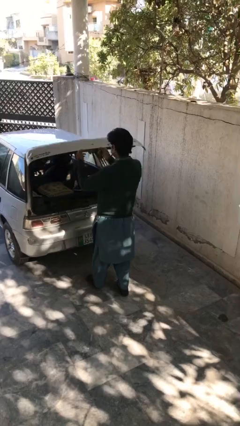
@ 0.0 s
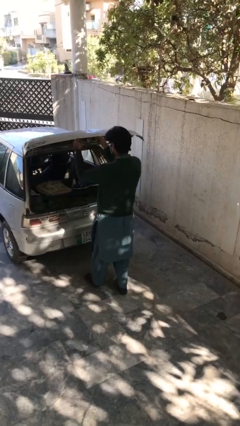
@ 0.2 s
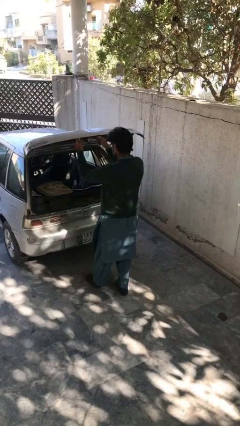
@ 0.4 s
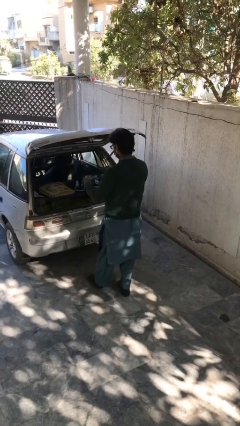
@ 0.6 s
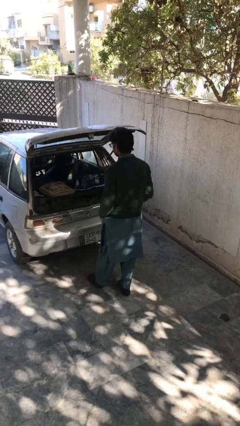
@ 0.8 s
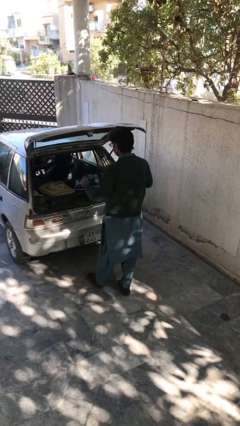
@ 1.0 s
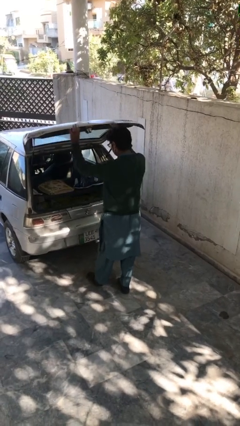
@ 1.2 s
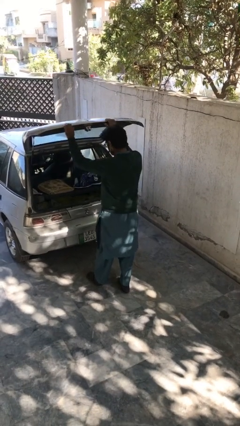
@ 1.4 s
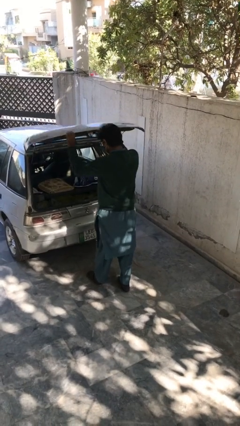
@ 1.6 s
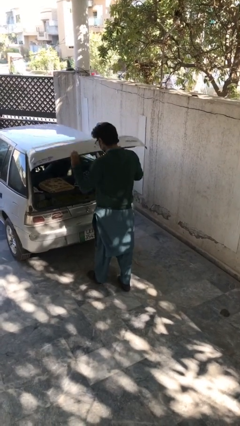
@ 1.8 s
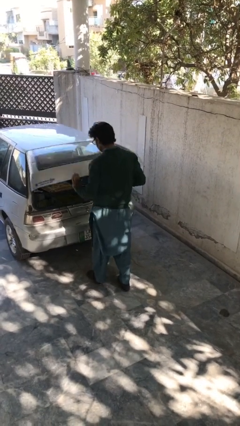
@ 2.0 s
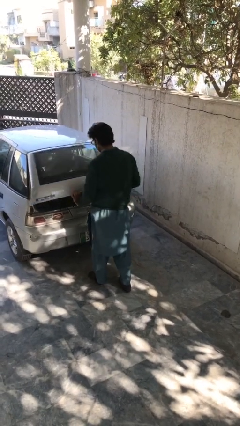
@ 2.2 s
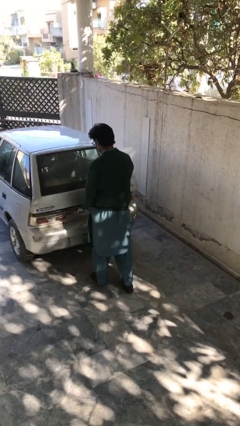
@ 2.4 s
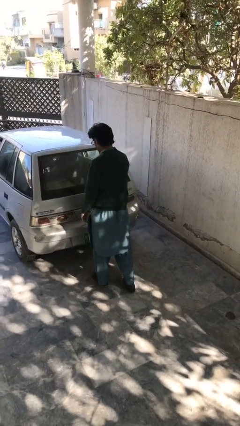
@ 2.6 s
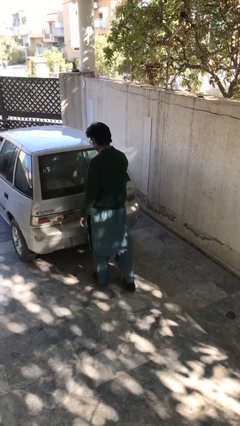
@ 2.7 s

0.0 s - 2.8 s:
person closes car trunk

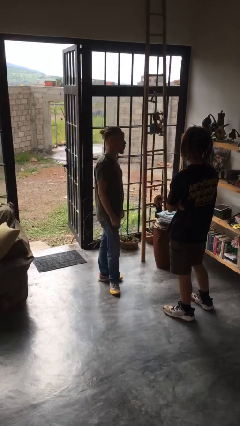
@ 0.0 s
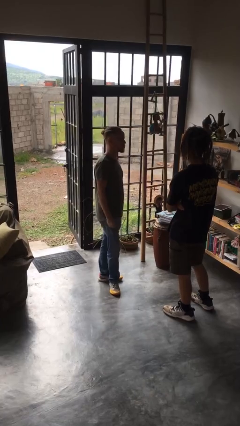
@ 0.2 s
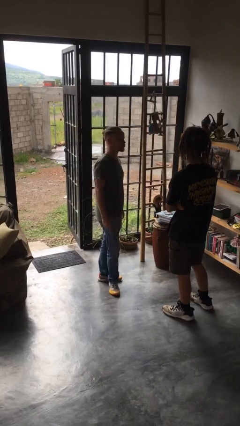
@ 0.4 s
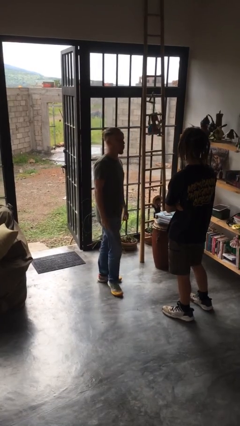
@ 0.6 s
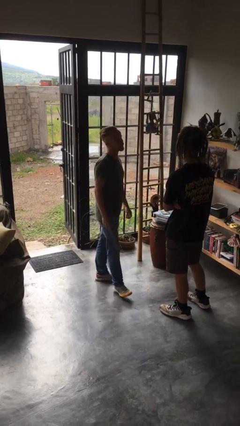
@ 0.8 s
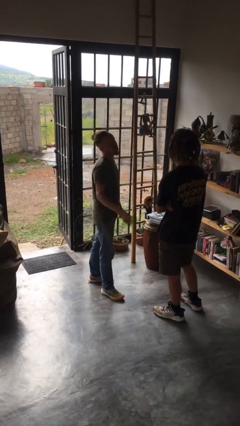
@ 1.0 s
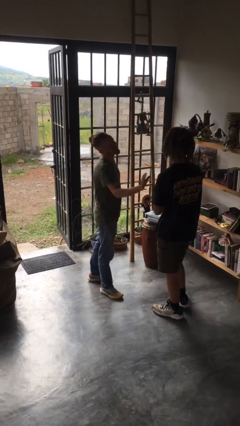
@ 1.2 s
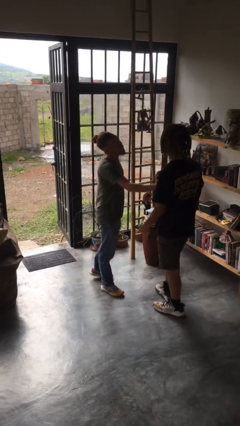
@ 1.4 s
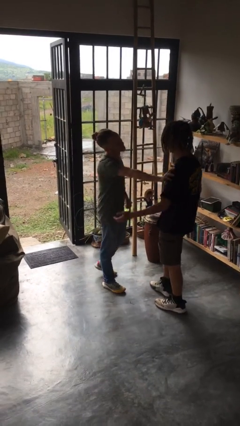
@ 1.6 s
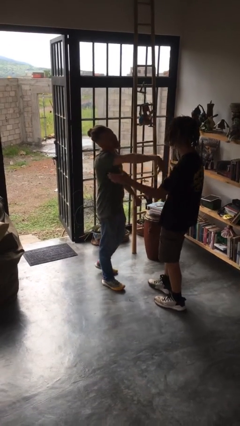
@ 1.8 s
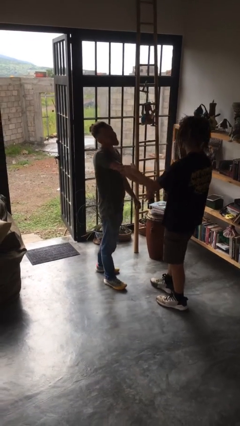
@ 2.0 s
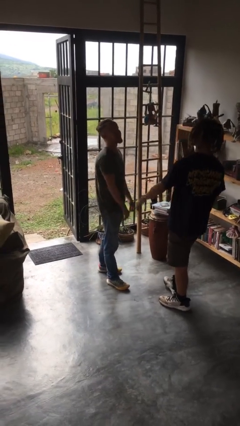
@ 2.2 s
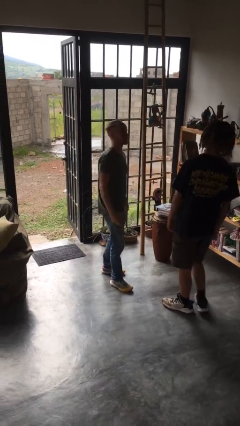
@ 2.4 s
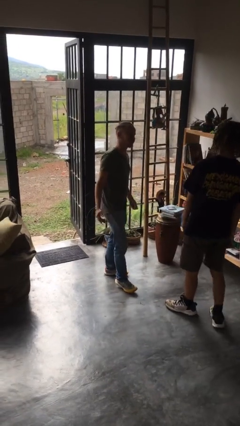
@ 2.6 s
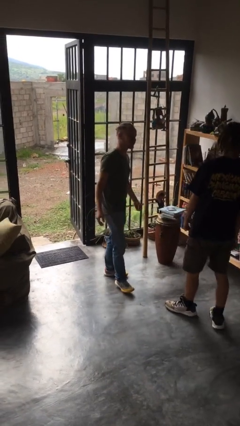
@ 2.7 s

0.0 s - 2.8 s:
person shoves person

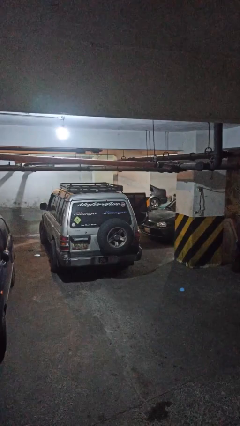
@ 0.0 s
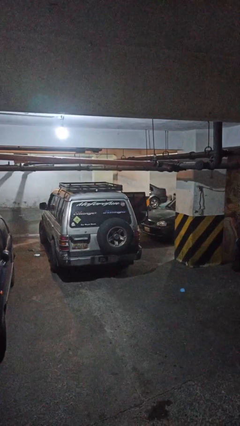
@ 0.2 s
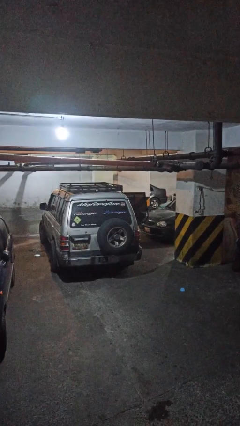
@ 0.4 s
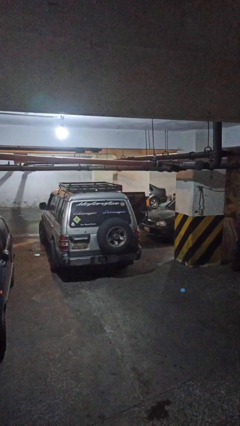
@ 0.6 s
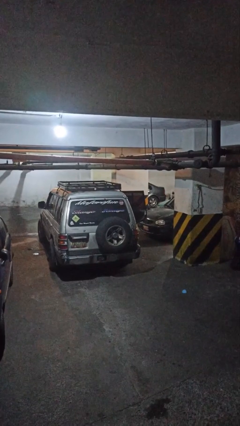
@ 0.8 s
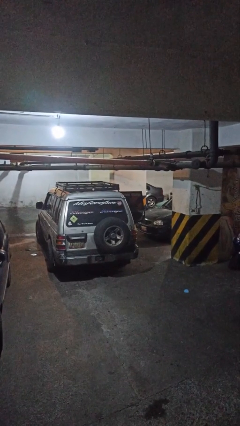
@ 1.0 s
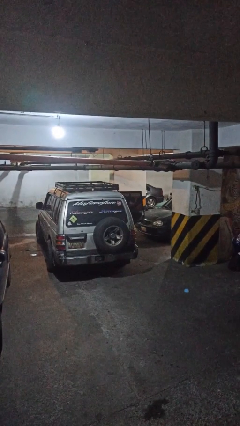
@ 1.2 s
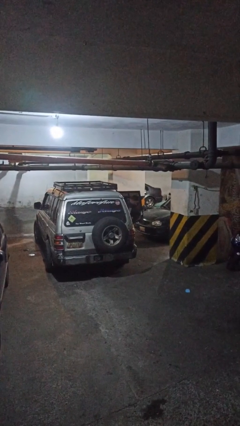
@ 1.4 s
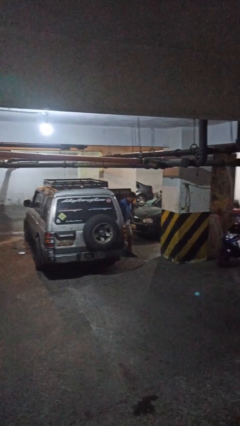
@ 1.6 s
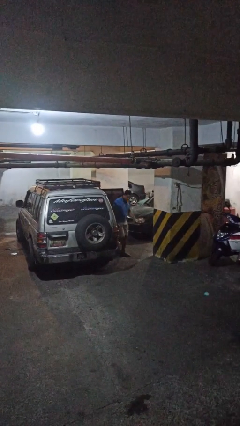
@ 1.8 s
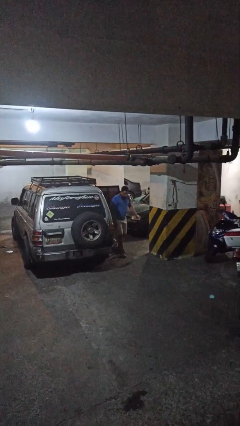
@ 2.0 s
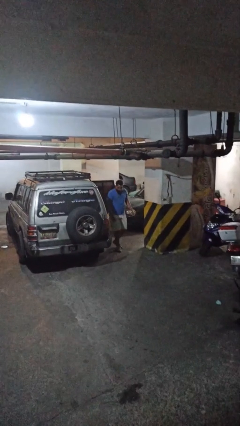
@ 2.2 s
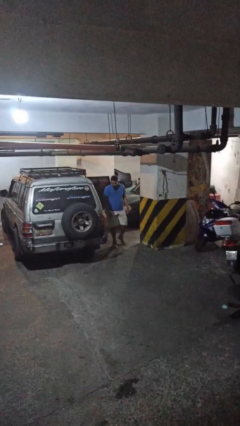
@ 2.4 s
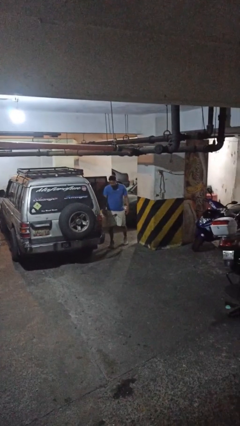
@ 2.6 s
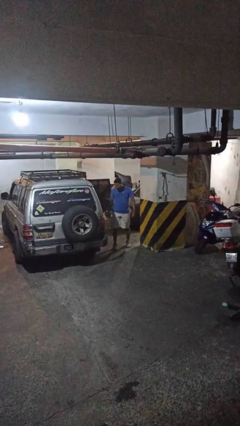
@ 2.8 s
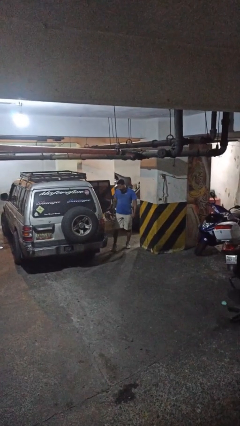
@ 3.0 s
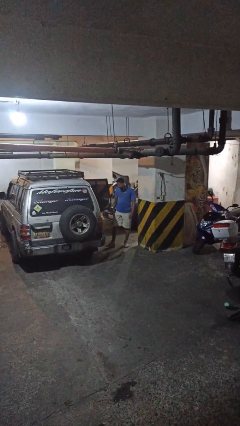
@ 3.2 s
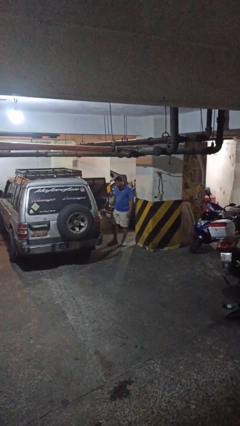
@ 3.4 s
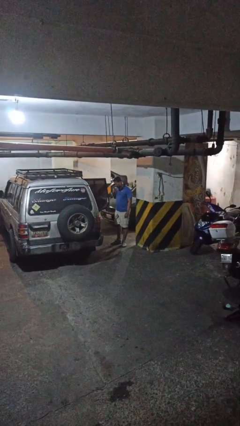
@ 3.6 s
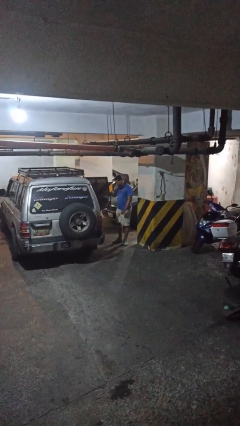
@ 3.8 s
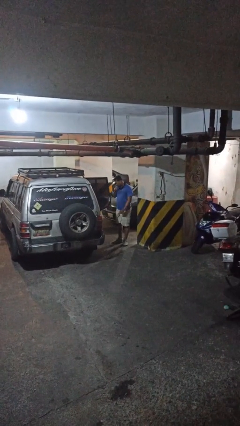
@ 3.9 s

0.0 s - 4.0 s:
person exits car

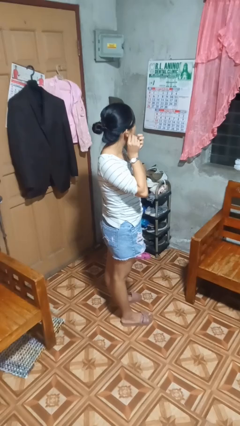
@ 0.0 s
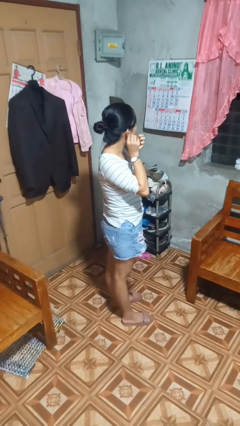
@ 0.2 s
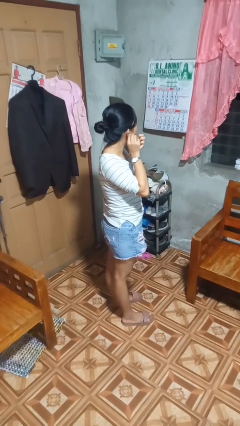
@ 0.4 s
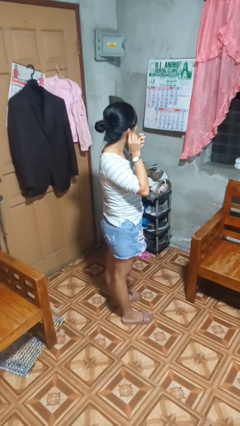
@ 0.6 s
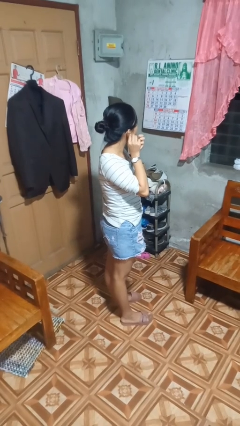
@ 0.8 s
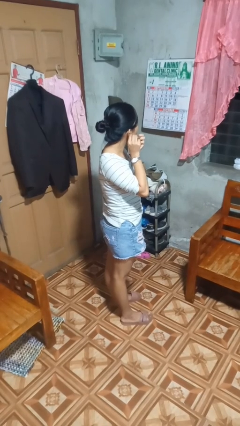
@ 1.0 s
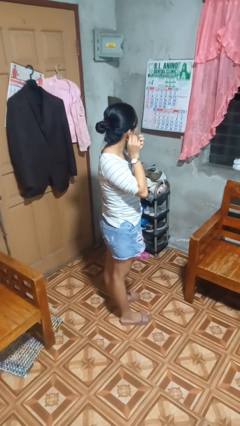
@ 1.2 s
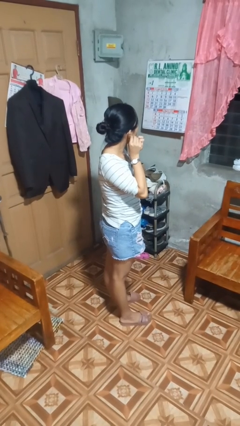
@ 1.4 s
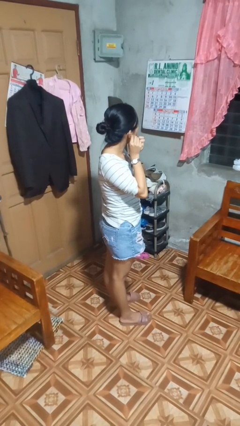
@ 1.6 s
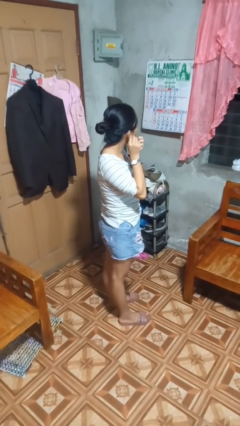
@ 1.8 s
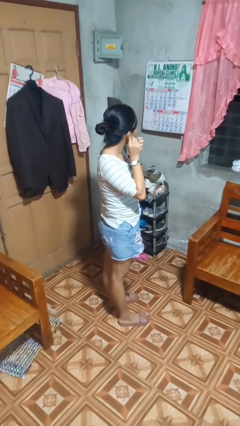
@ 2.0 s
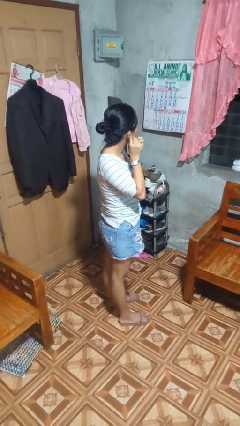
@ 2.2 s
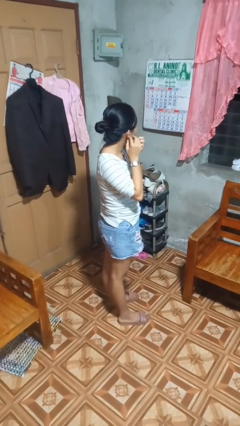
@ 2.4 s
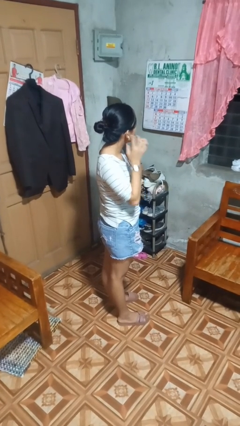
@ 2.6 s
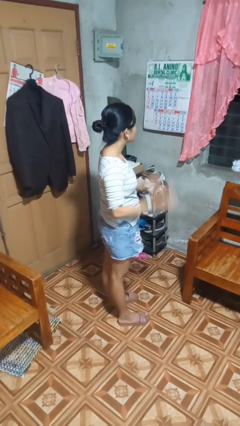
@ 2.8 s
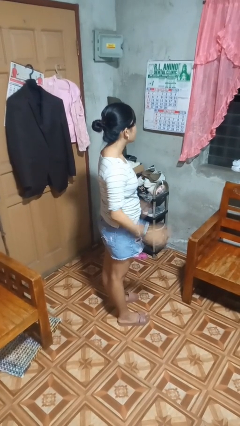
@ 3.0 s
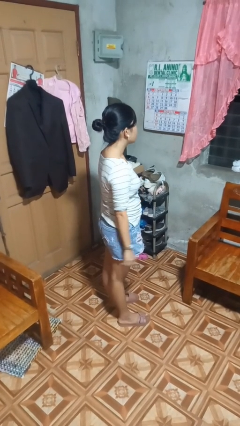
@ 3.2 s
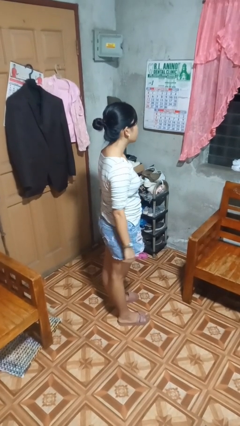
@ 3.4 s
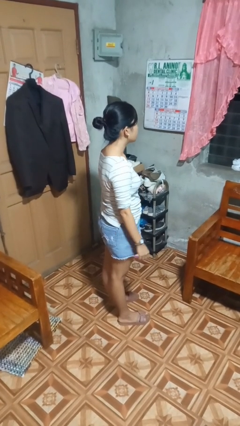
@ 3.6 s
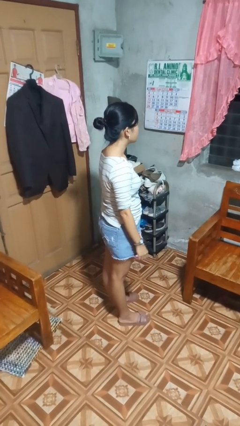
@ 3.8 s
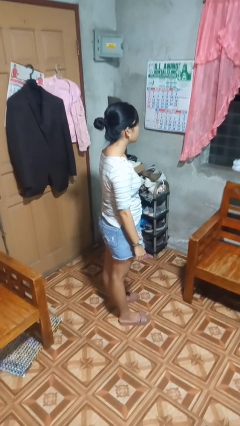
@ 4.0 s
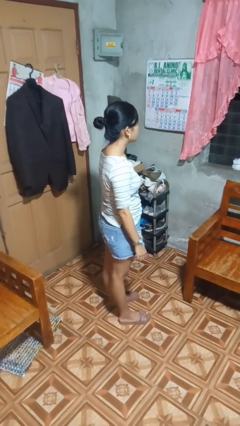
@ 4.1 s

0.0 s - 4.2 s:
person puts on earrings

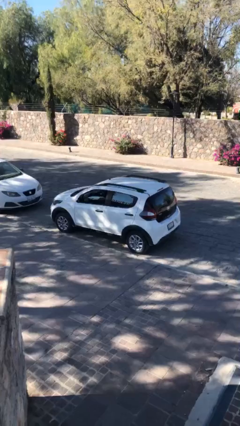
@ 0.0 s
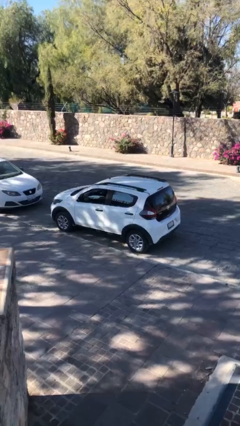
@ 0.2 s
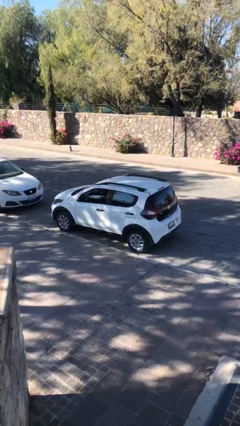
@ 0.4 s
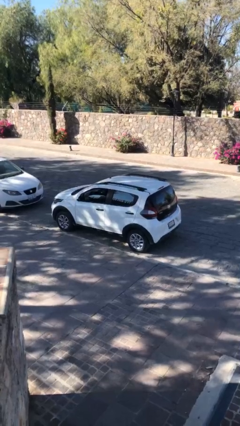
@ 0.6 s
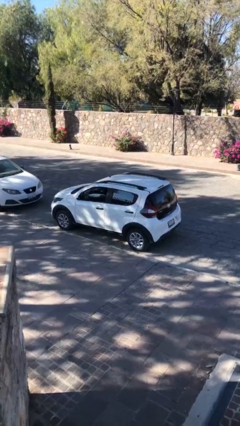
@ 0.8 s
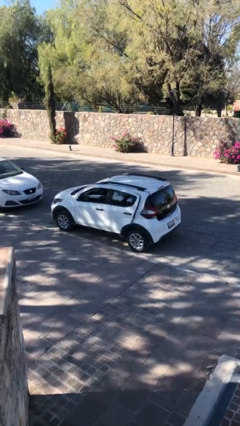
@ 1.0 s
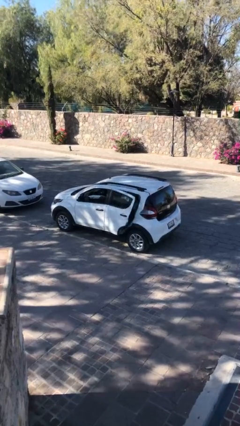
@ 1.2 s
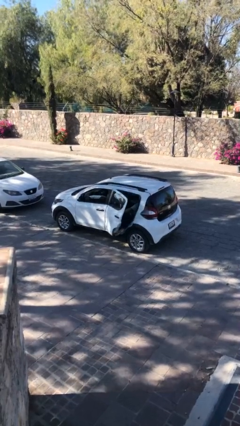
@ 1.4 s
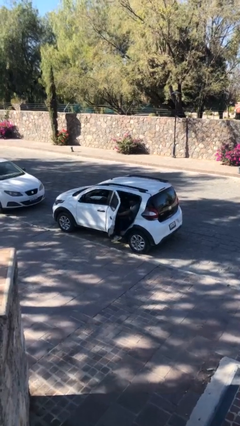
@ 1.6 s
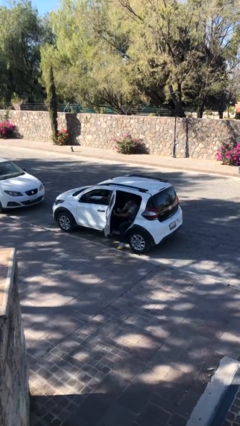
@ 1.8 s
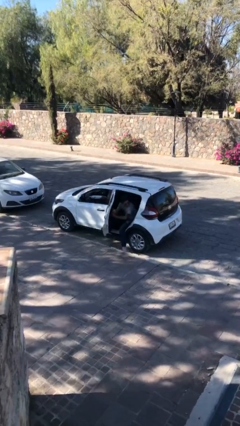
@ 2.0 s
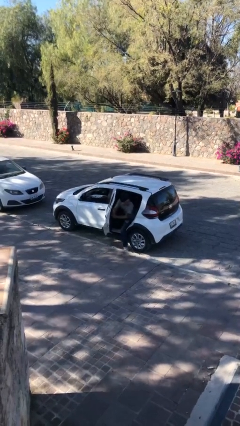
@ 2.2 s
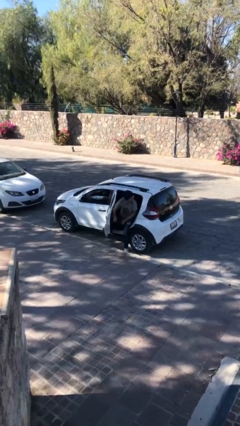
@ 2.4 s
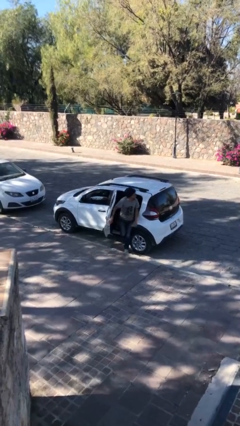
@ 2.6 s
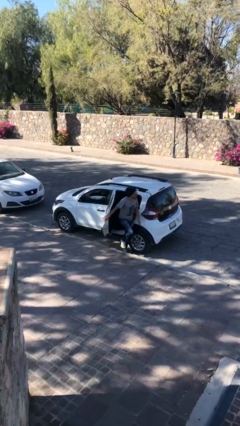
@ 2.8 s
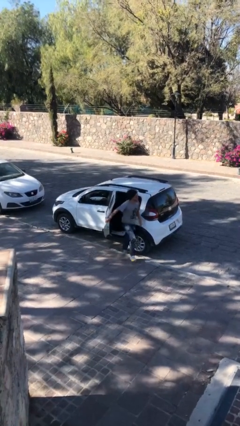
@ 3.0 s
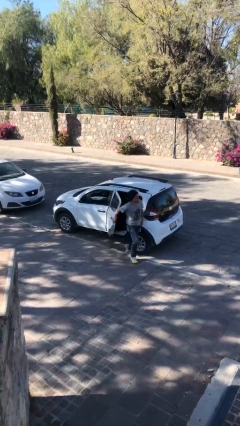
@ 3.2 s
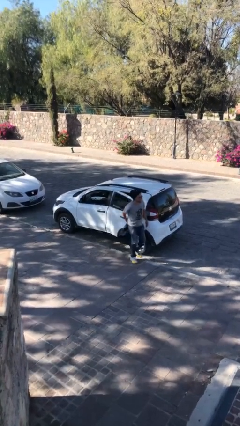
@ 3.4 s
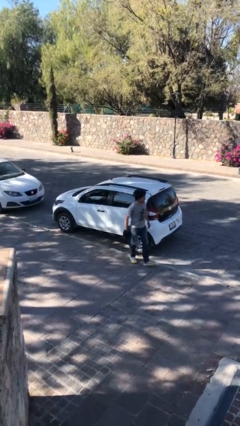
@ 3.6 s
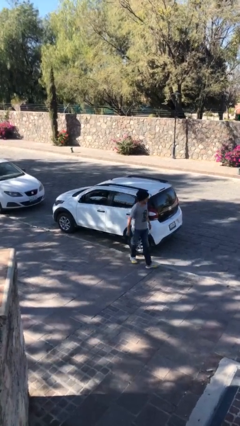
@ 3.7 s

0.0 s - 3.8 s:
car drops off person

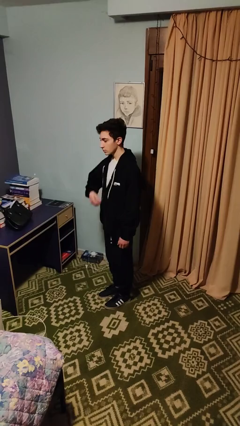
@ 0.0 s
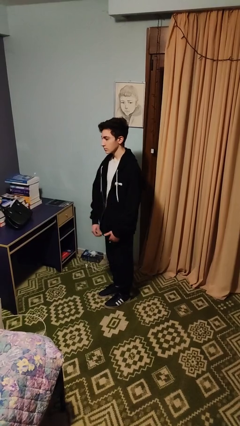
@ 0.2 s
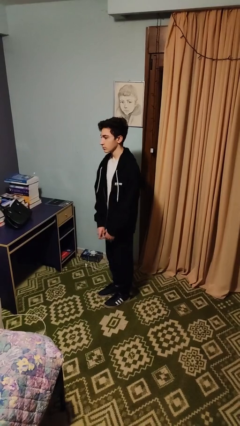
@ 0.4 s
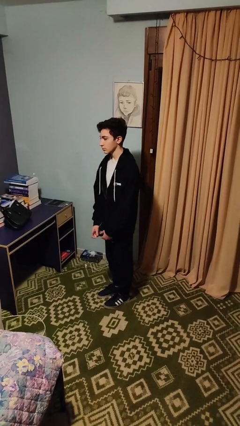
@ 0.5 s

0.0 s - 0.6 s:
person unzips jacket
